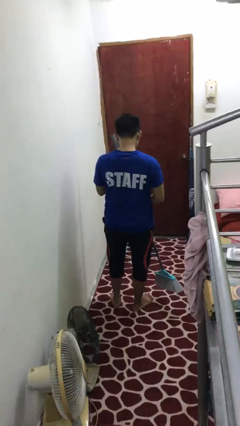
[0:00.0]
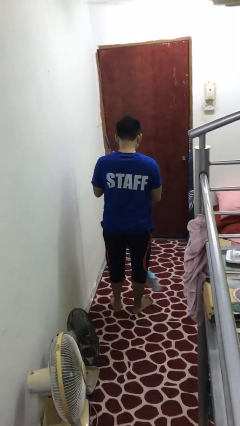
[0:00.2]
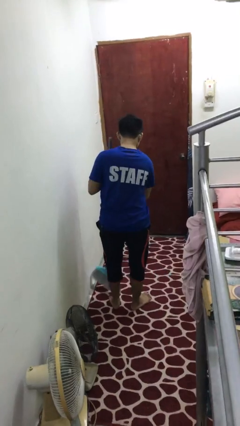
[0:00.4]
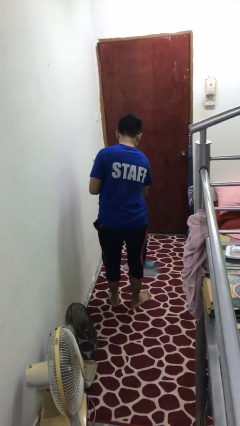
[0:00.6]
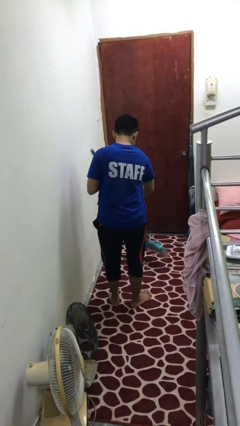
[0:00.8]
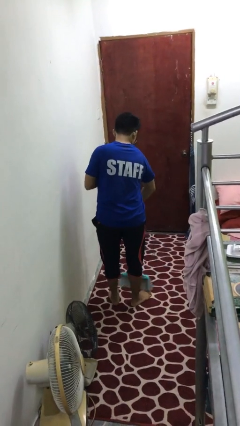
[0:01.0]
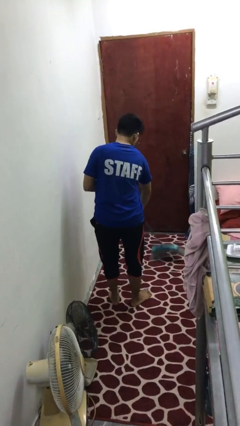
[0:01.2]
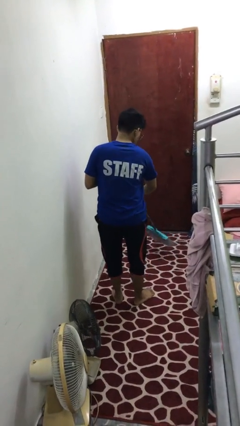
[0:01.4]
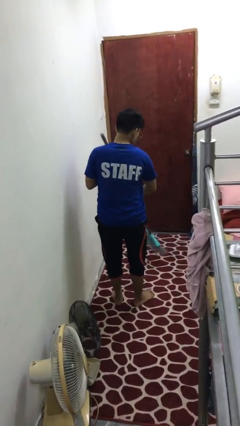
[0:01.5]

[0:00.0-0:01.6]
person sweeps floor

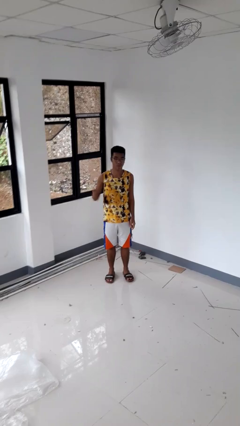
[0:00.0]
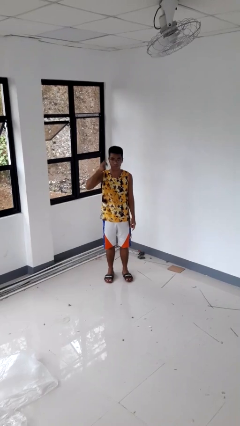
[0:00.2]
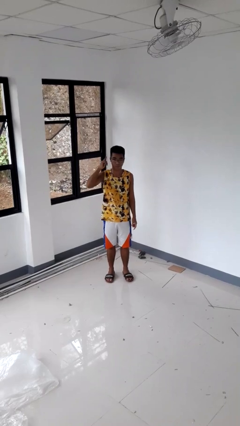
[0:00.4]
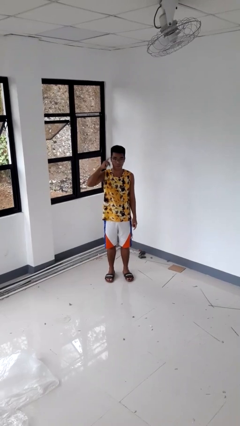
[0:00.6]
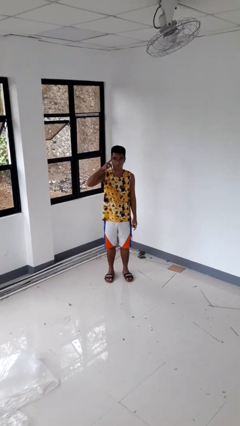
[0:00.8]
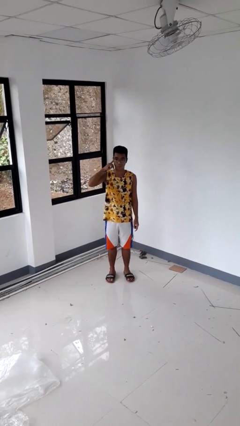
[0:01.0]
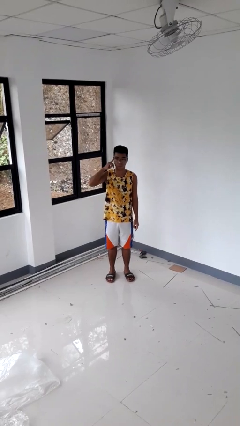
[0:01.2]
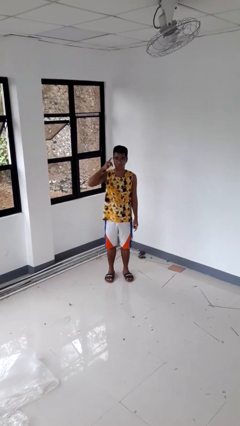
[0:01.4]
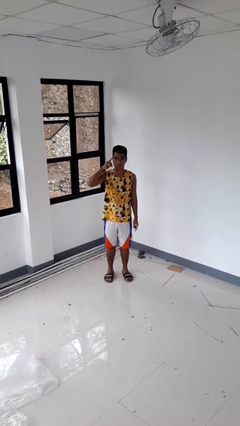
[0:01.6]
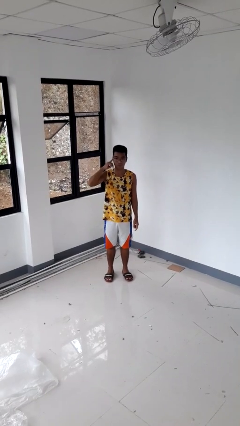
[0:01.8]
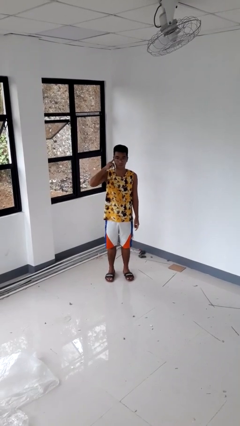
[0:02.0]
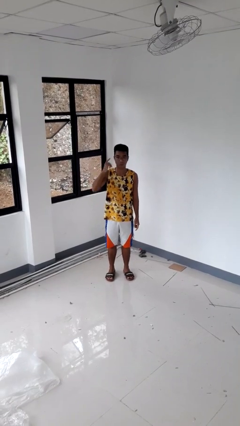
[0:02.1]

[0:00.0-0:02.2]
person gestures listen closely

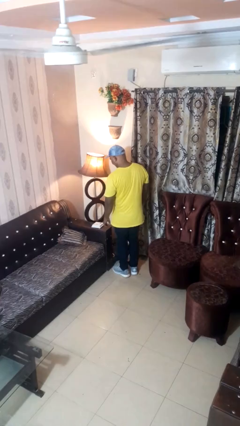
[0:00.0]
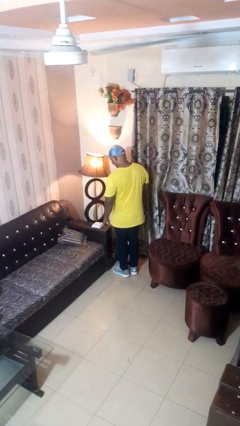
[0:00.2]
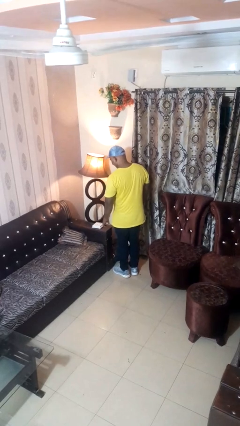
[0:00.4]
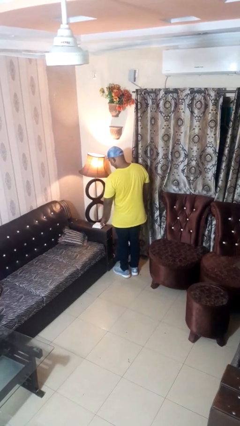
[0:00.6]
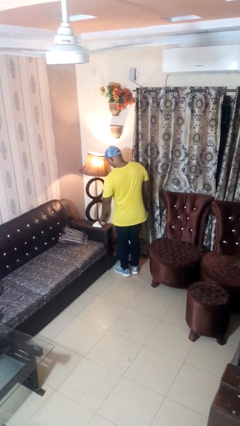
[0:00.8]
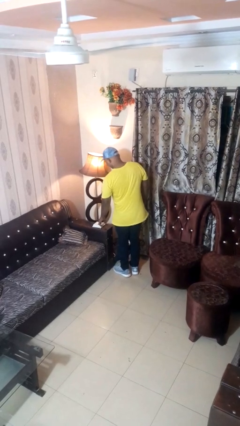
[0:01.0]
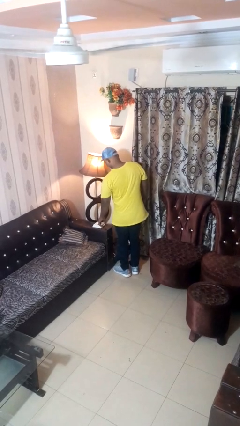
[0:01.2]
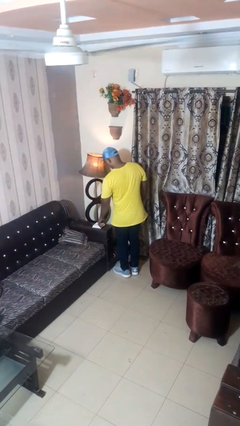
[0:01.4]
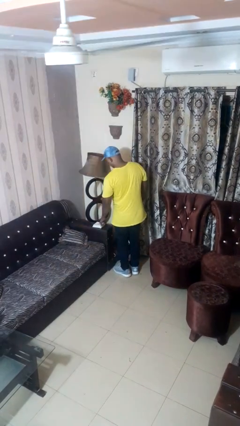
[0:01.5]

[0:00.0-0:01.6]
person turns off lamp

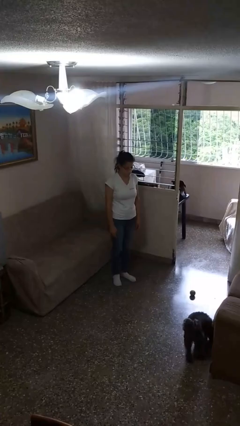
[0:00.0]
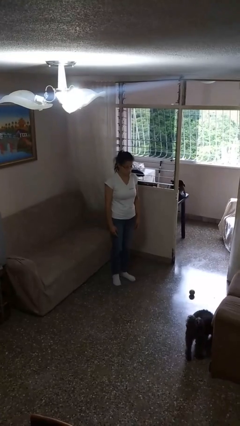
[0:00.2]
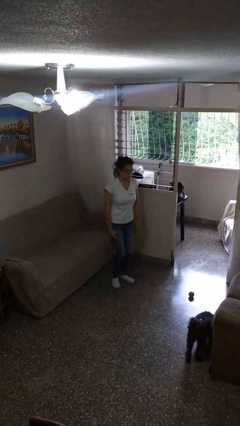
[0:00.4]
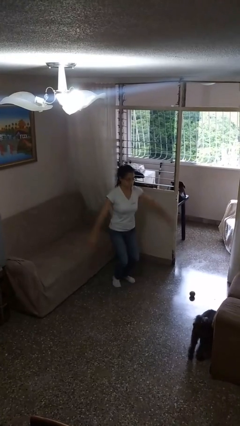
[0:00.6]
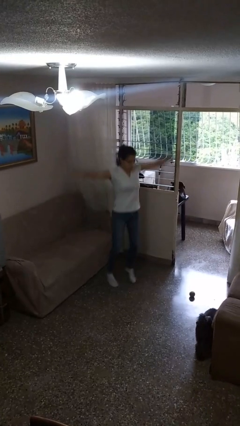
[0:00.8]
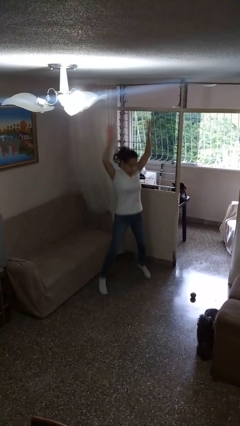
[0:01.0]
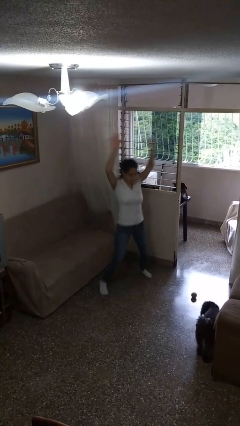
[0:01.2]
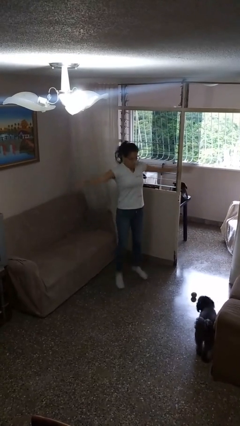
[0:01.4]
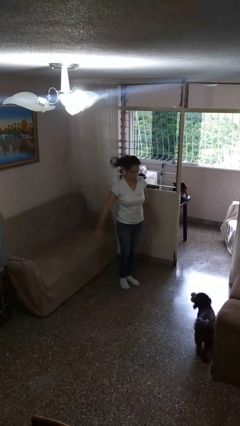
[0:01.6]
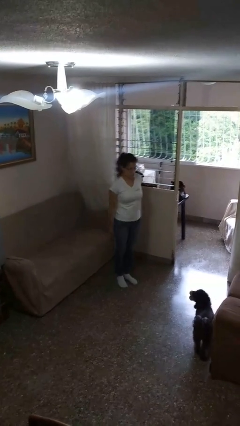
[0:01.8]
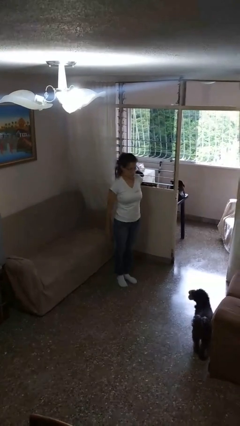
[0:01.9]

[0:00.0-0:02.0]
person exercises with jumping jacks

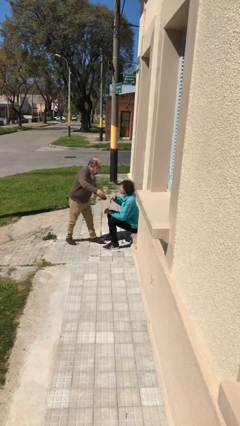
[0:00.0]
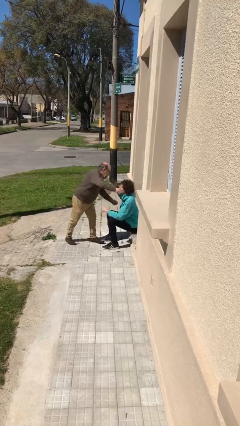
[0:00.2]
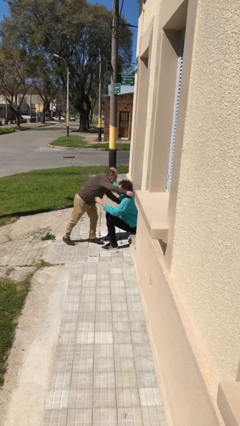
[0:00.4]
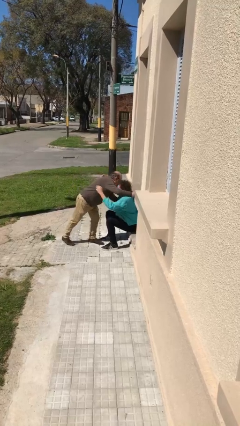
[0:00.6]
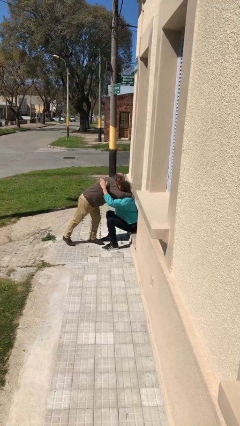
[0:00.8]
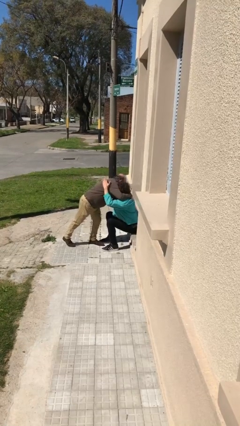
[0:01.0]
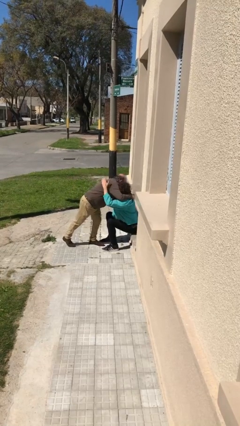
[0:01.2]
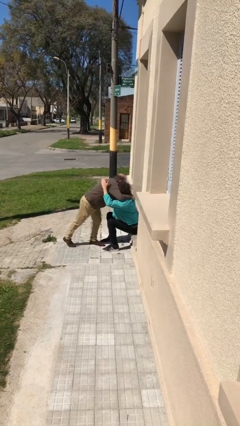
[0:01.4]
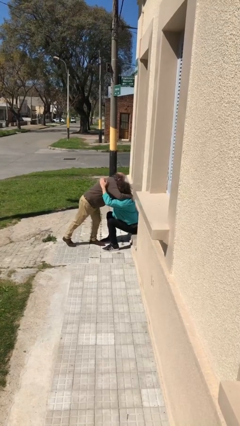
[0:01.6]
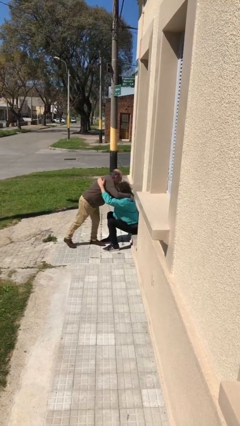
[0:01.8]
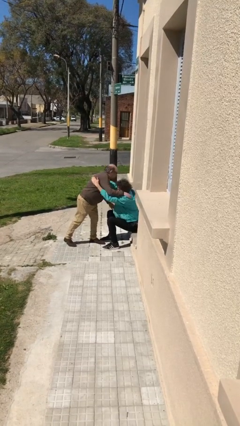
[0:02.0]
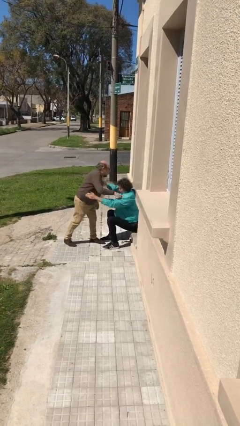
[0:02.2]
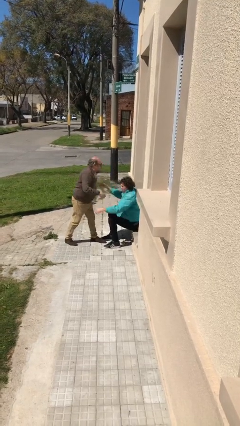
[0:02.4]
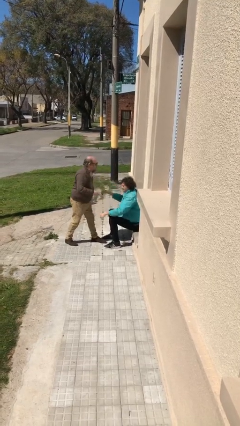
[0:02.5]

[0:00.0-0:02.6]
person embraces person

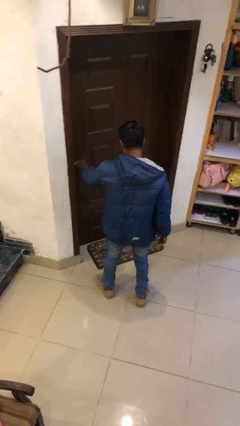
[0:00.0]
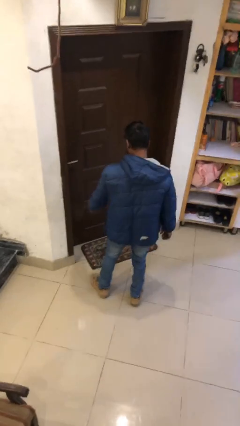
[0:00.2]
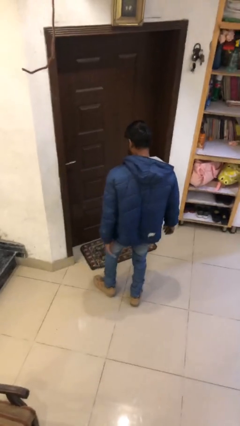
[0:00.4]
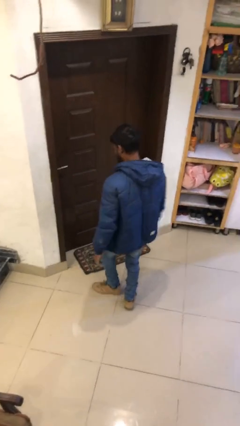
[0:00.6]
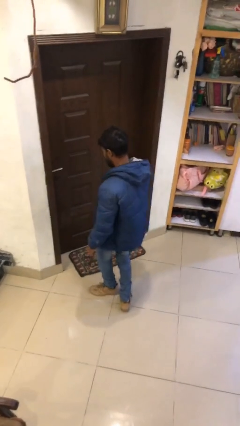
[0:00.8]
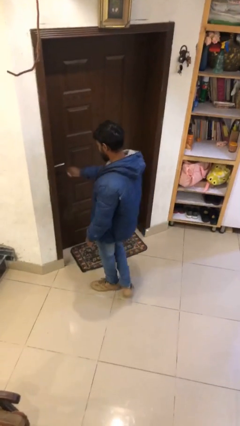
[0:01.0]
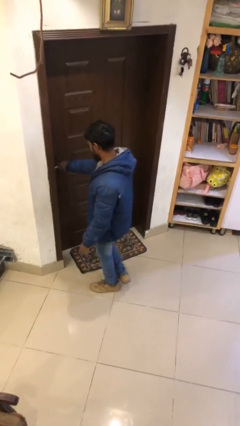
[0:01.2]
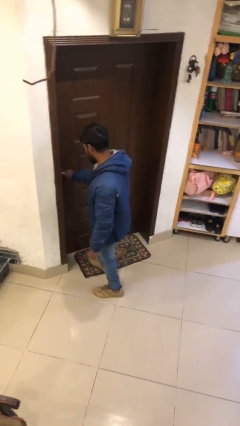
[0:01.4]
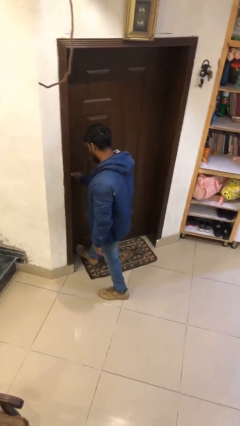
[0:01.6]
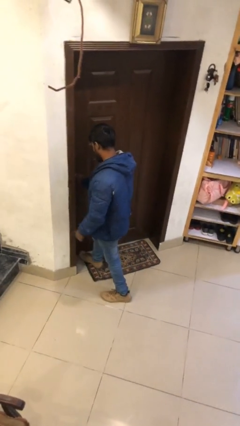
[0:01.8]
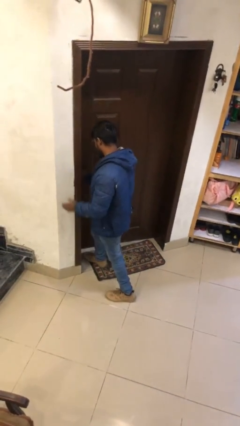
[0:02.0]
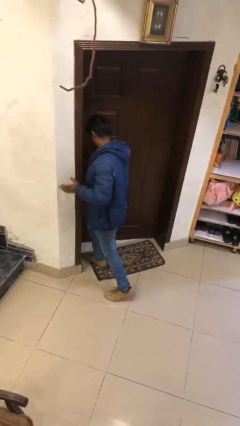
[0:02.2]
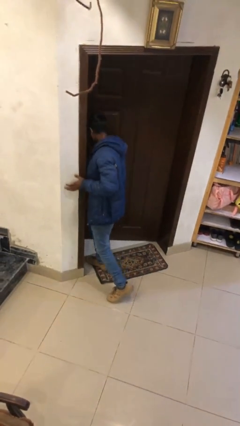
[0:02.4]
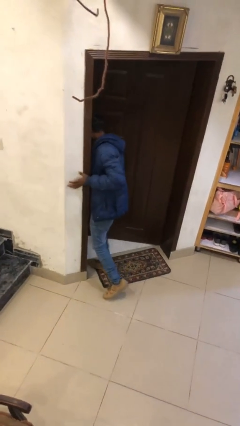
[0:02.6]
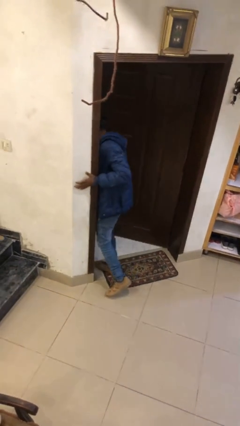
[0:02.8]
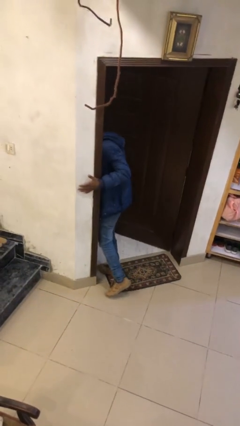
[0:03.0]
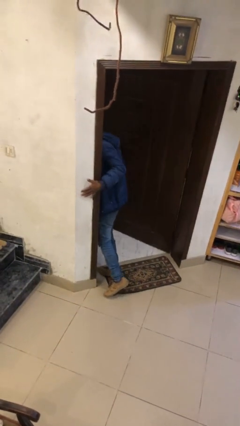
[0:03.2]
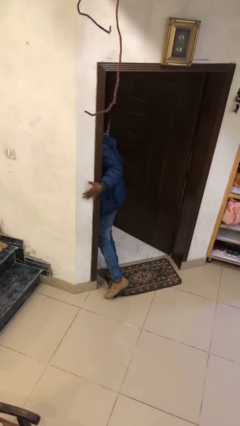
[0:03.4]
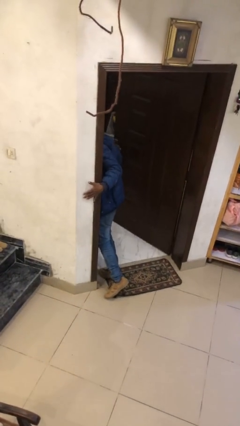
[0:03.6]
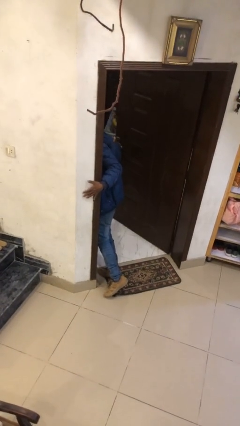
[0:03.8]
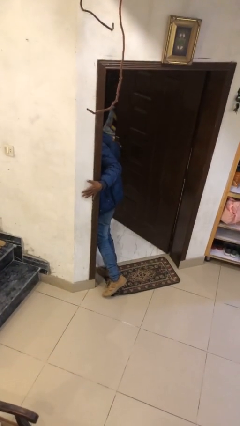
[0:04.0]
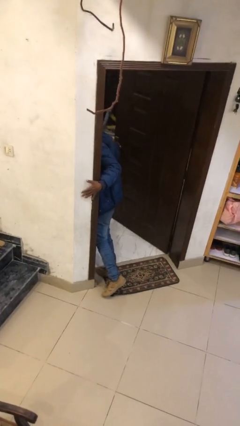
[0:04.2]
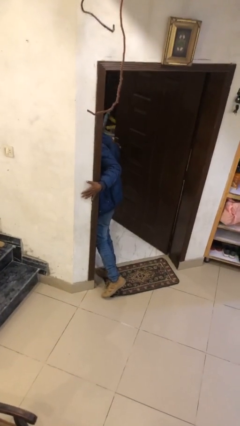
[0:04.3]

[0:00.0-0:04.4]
person opens facility door

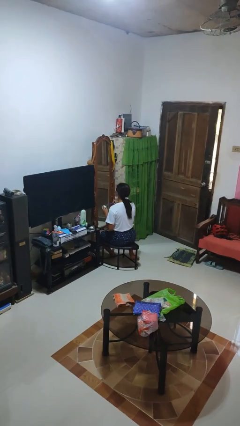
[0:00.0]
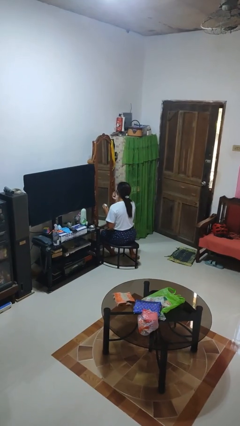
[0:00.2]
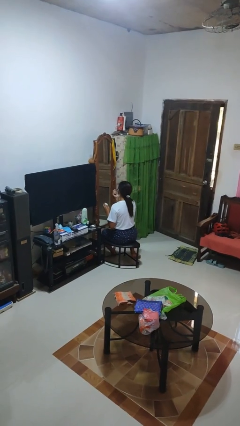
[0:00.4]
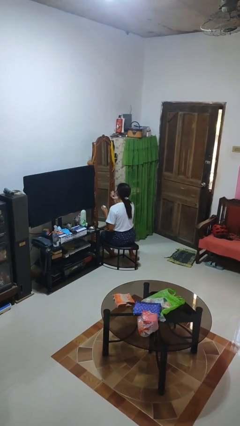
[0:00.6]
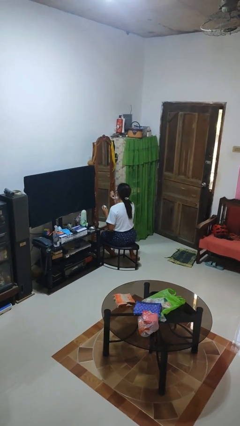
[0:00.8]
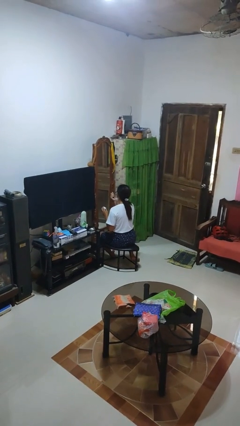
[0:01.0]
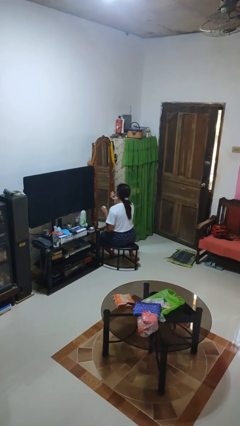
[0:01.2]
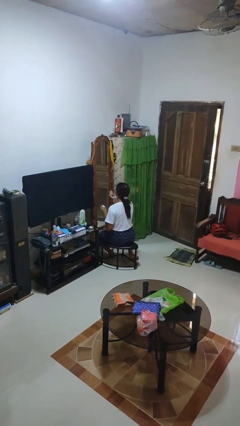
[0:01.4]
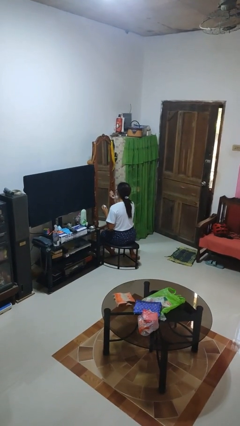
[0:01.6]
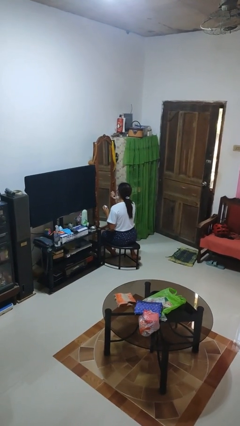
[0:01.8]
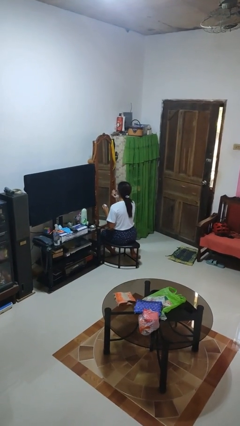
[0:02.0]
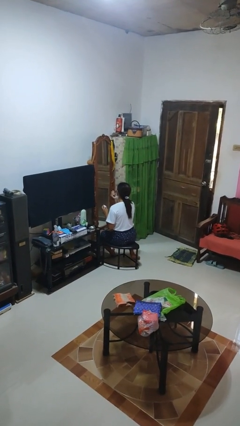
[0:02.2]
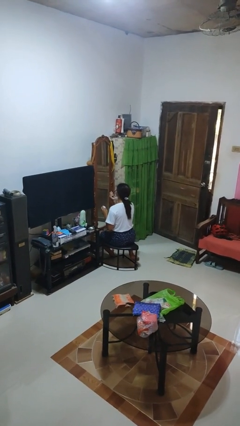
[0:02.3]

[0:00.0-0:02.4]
person applies eye makeup

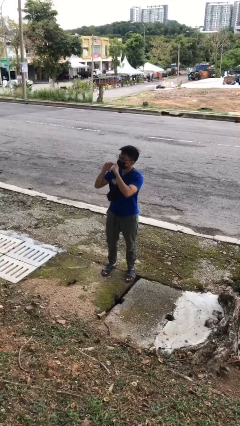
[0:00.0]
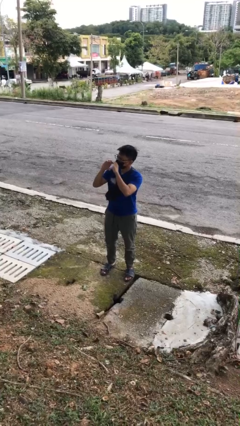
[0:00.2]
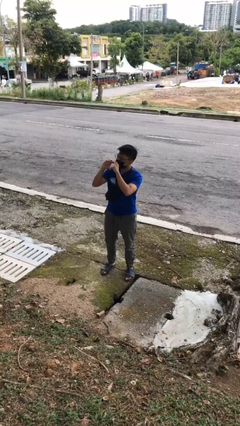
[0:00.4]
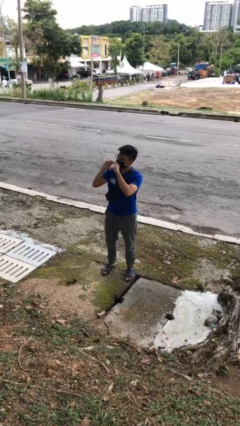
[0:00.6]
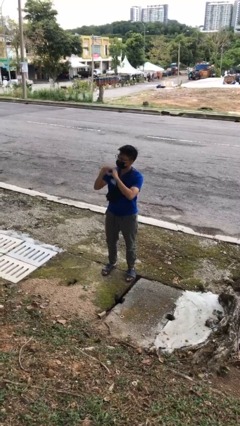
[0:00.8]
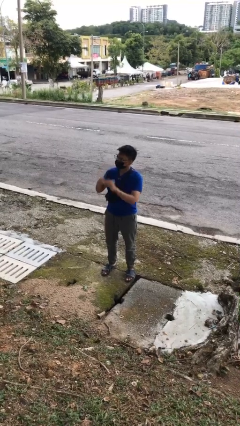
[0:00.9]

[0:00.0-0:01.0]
person gestures heart
